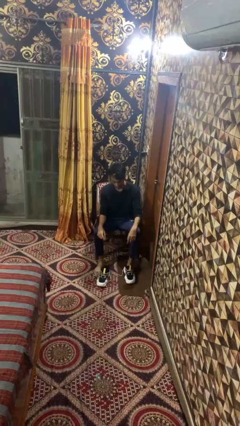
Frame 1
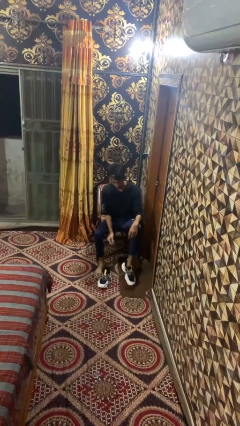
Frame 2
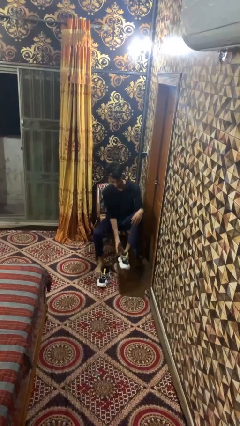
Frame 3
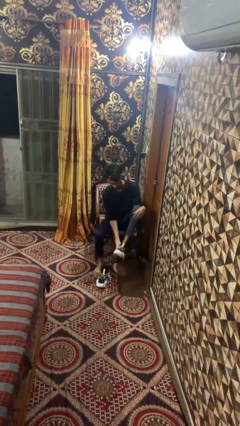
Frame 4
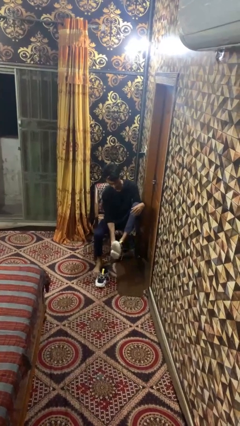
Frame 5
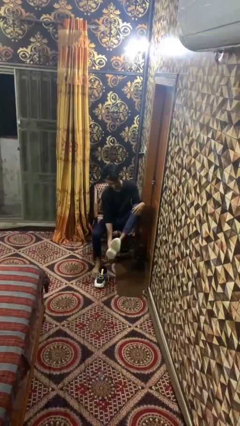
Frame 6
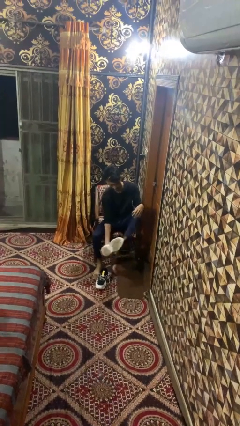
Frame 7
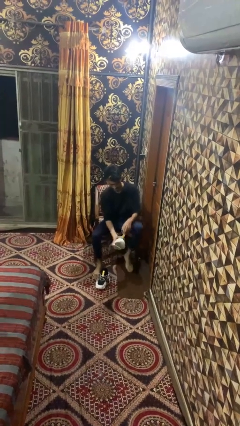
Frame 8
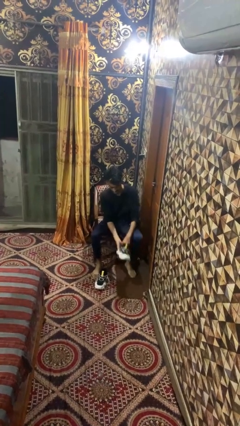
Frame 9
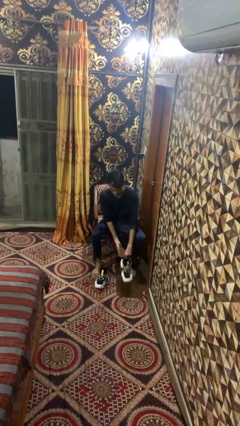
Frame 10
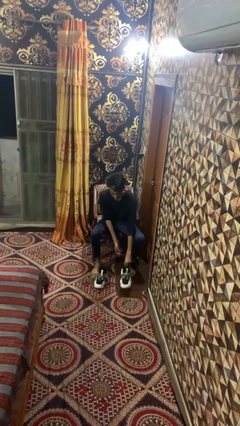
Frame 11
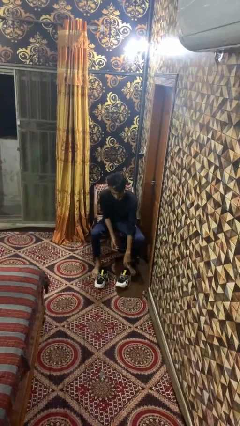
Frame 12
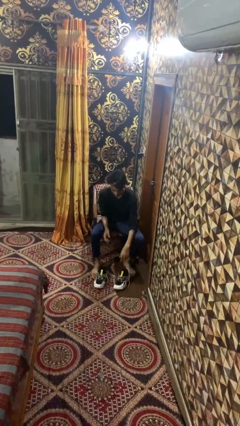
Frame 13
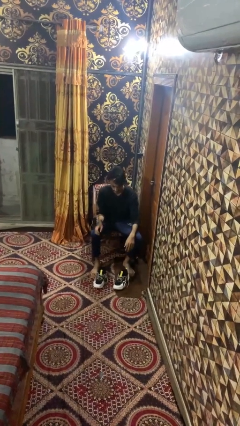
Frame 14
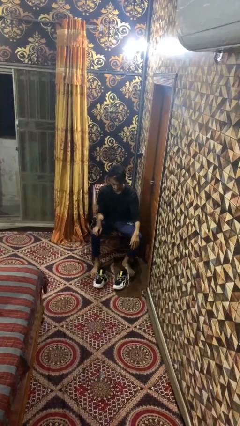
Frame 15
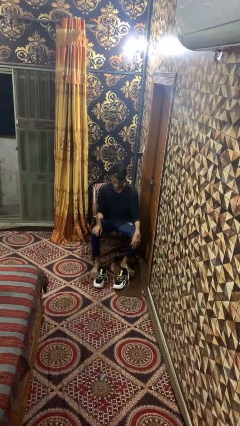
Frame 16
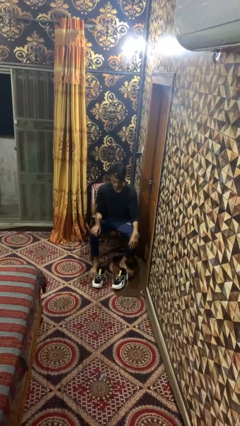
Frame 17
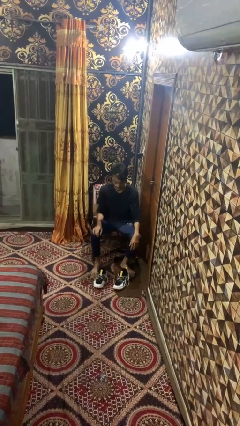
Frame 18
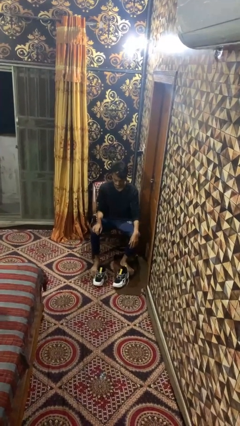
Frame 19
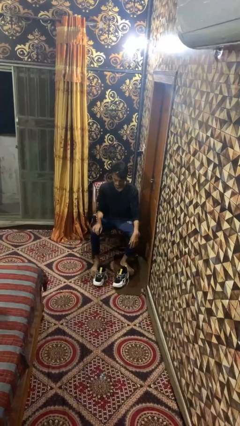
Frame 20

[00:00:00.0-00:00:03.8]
person takes off shoes

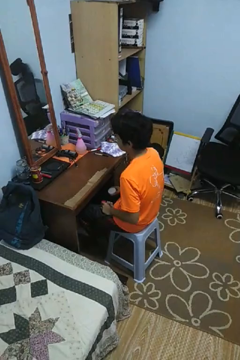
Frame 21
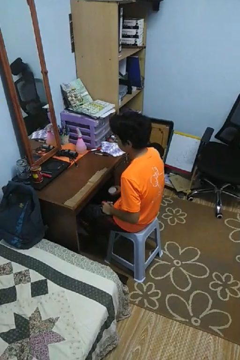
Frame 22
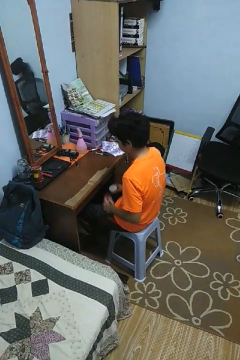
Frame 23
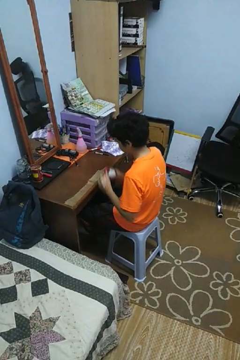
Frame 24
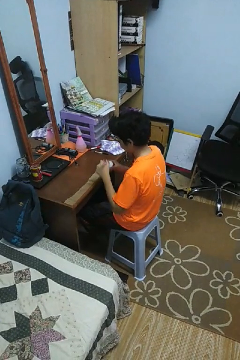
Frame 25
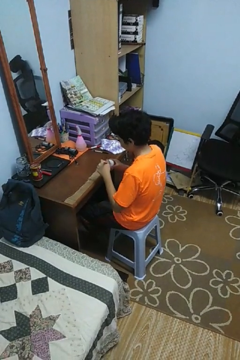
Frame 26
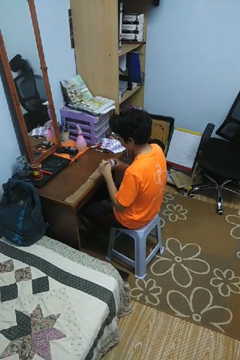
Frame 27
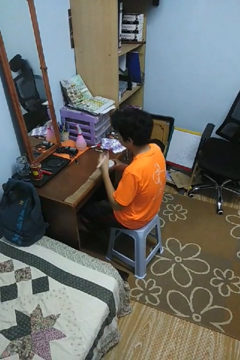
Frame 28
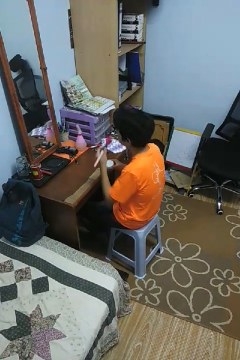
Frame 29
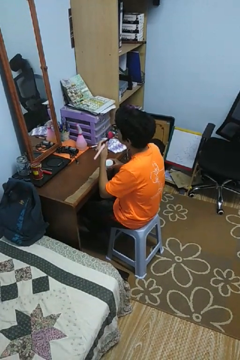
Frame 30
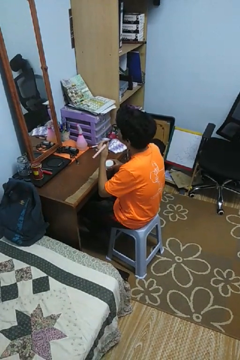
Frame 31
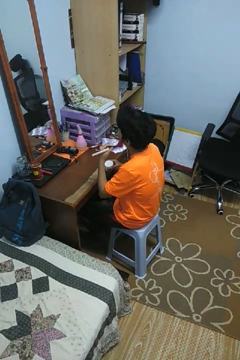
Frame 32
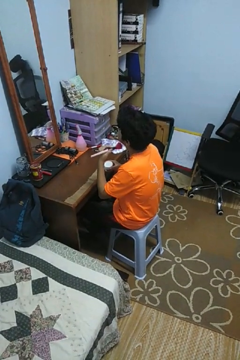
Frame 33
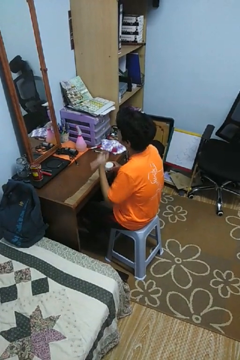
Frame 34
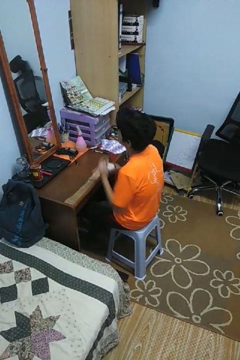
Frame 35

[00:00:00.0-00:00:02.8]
person applies foundation makeup

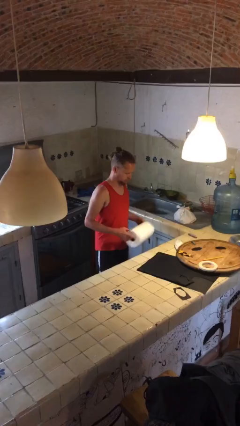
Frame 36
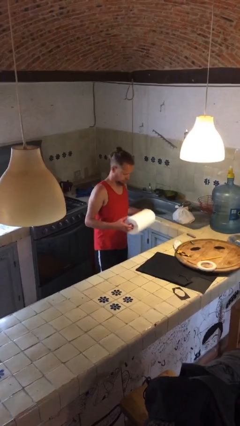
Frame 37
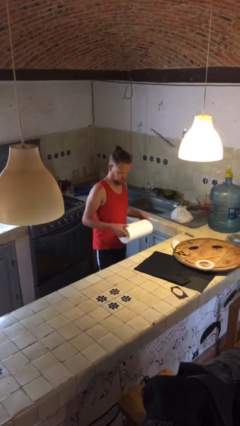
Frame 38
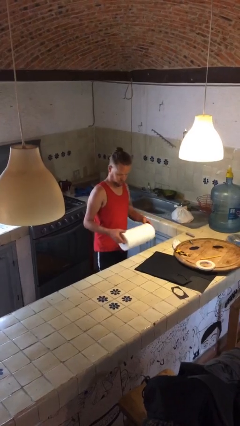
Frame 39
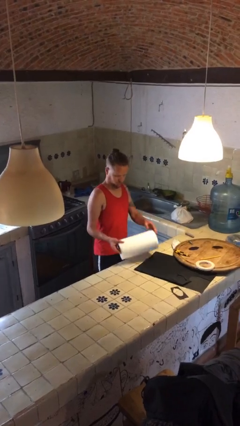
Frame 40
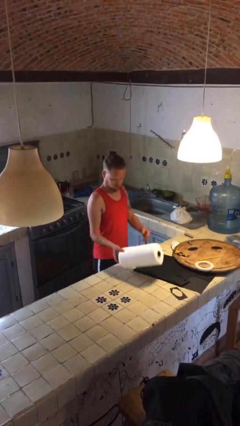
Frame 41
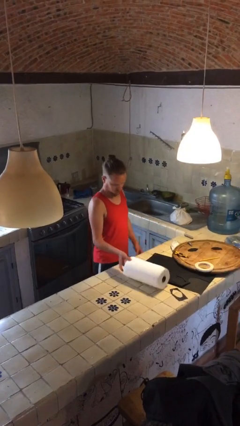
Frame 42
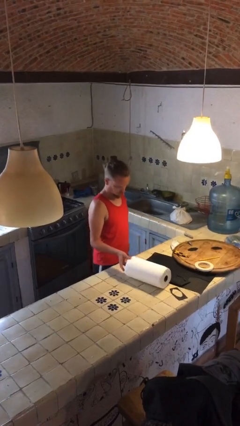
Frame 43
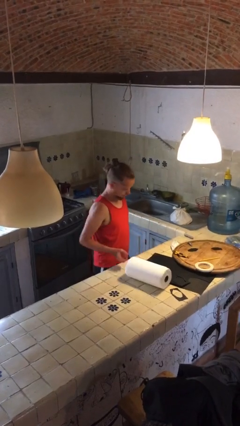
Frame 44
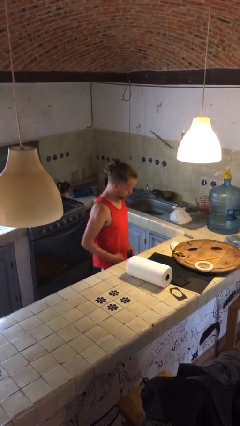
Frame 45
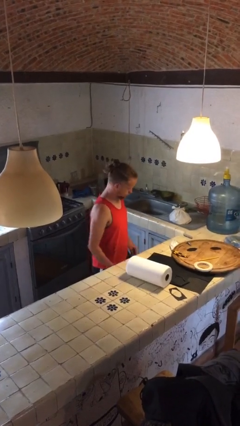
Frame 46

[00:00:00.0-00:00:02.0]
person puts down object on countertop

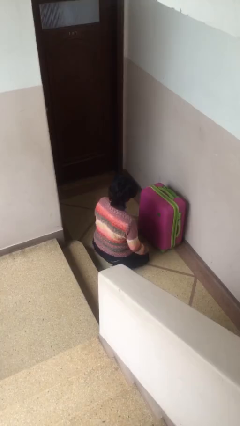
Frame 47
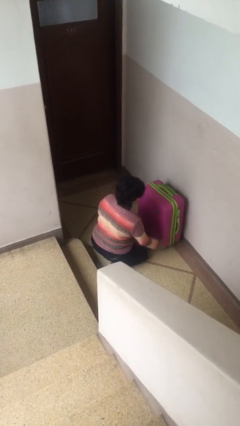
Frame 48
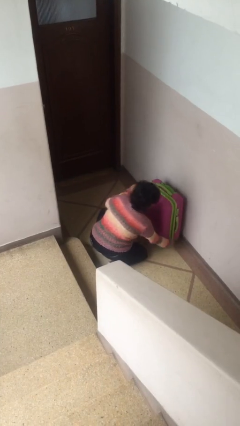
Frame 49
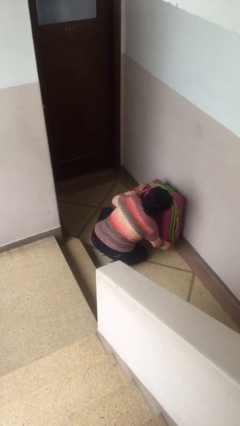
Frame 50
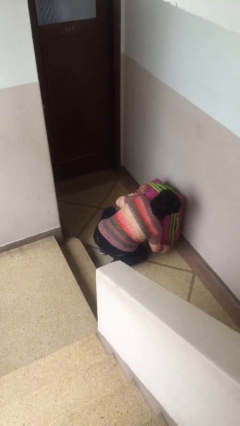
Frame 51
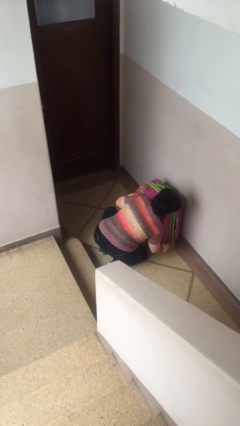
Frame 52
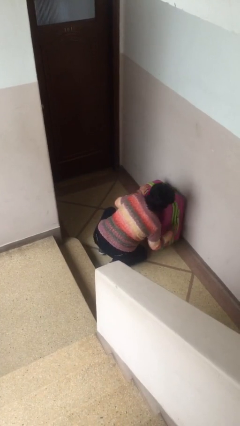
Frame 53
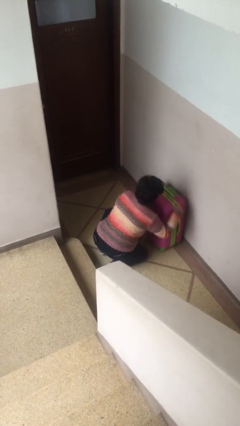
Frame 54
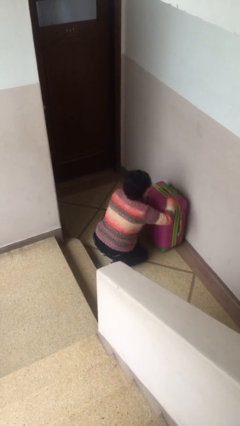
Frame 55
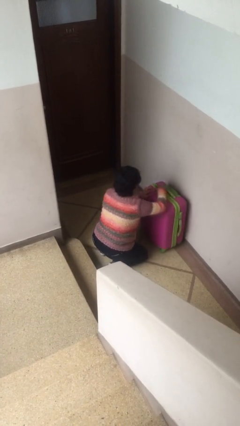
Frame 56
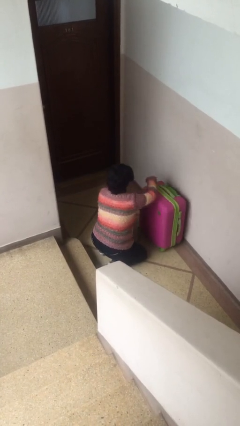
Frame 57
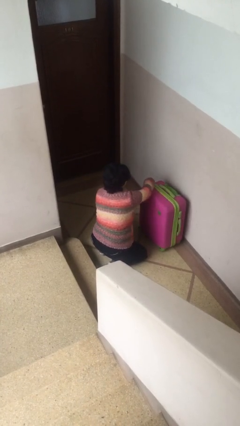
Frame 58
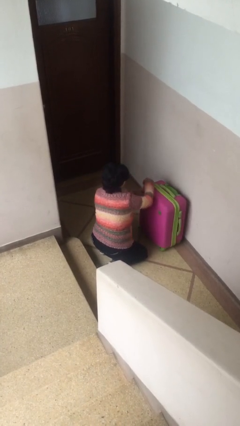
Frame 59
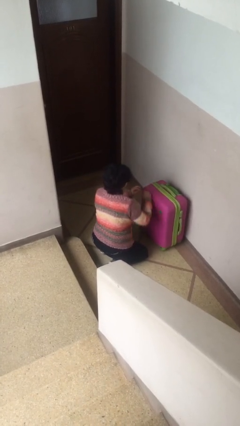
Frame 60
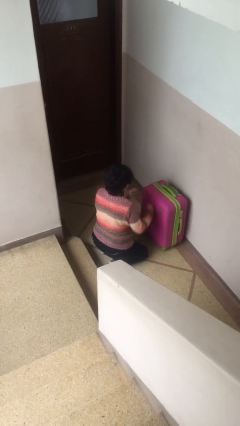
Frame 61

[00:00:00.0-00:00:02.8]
person closes suitcase

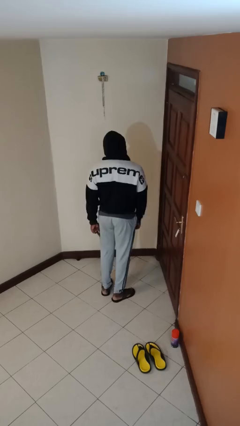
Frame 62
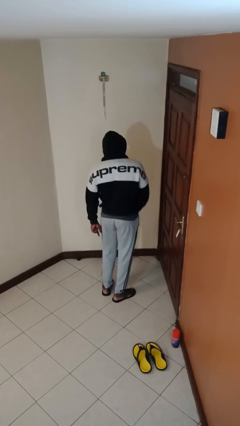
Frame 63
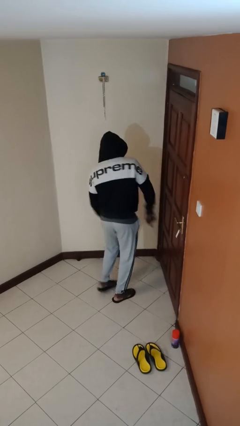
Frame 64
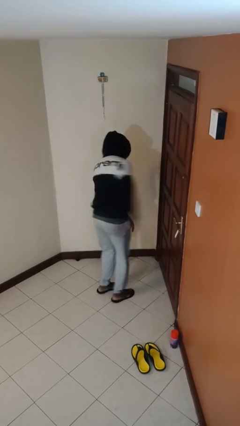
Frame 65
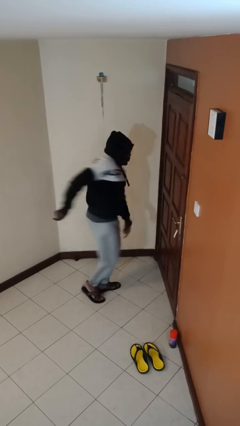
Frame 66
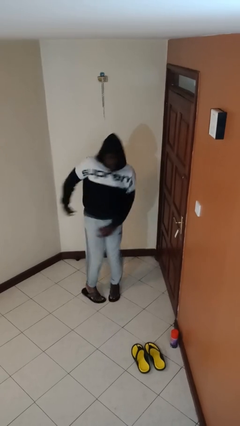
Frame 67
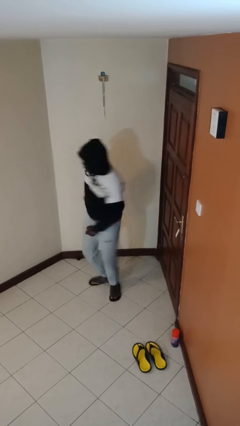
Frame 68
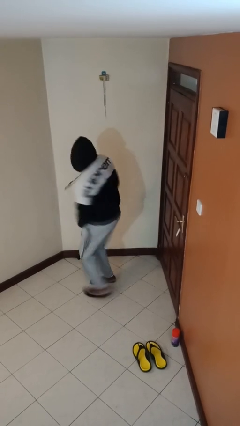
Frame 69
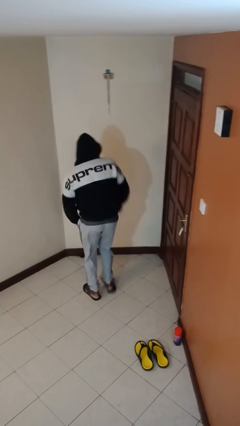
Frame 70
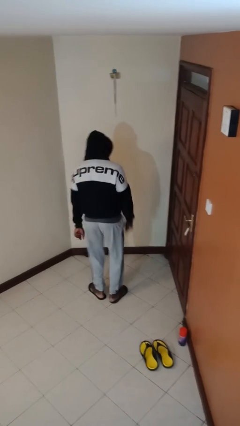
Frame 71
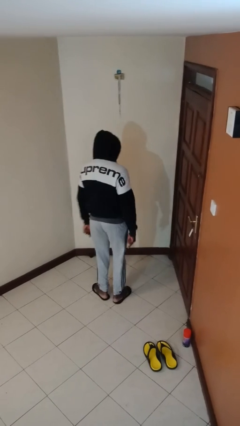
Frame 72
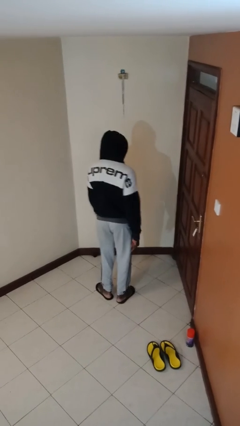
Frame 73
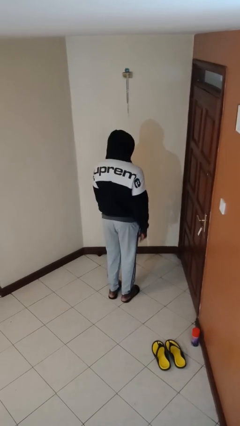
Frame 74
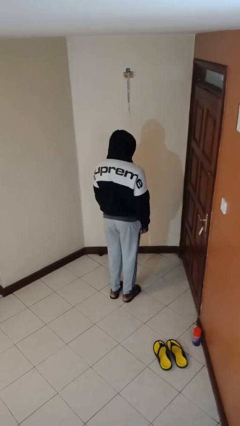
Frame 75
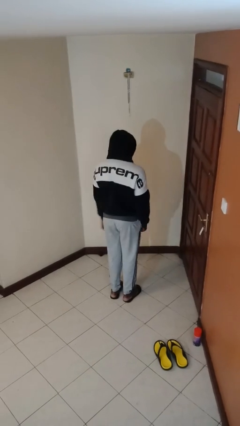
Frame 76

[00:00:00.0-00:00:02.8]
person twirls

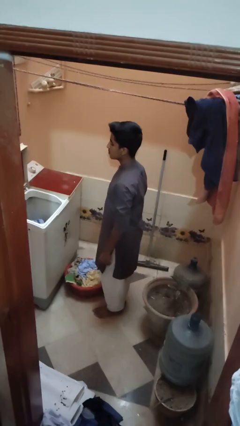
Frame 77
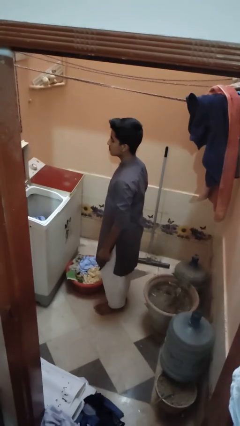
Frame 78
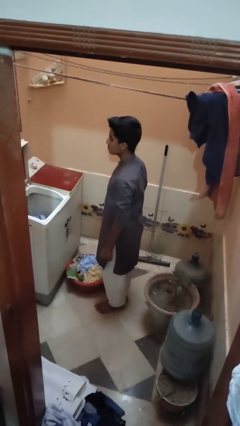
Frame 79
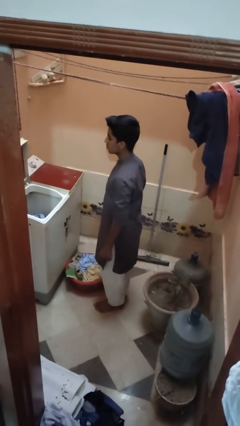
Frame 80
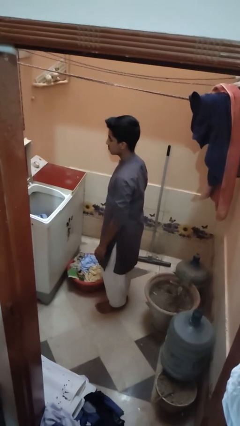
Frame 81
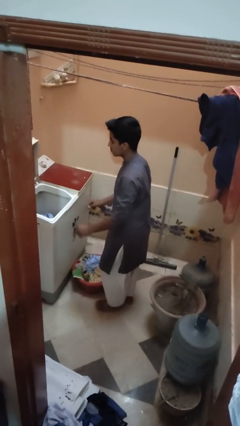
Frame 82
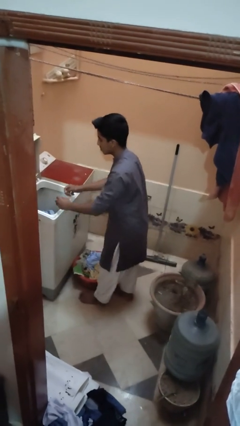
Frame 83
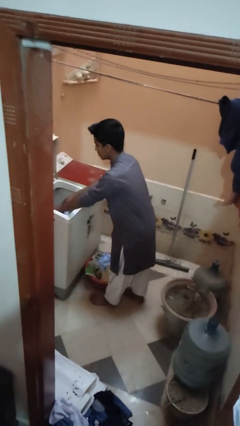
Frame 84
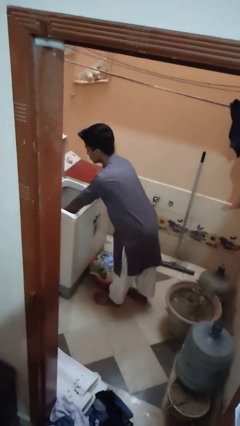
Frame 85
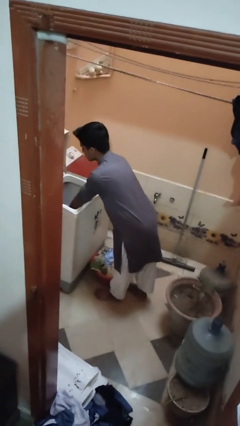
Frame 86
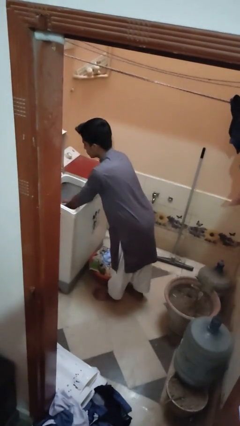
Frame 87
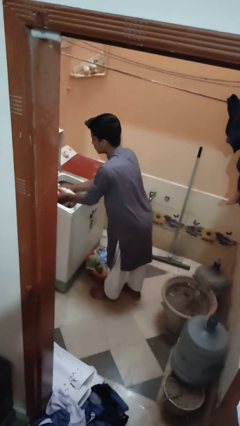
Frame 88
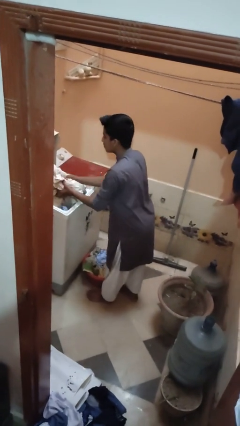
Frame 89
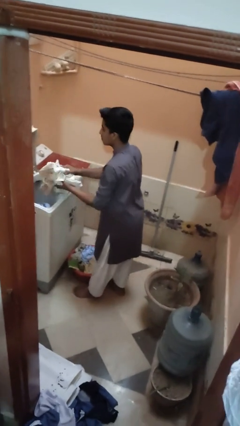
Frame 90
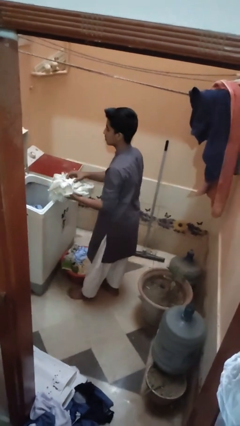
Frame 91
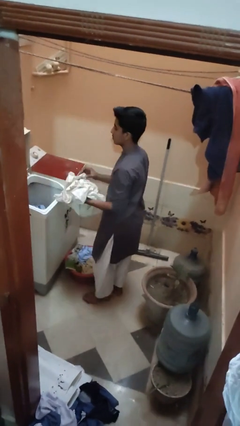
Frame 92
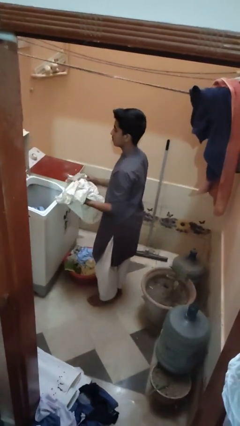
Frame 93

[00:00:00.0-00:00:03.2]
person unloads clotheswasher

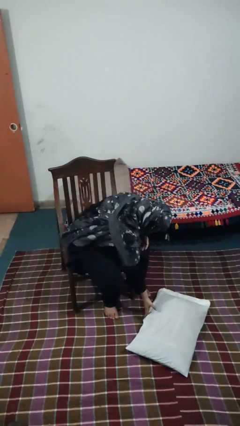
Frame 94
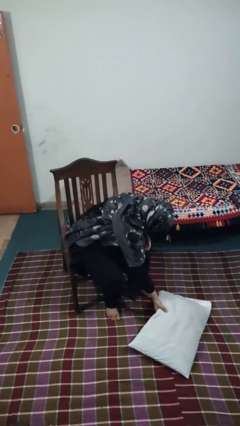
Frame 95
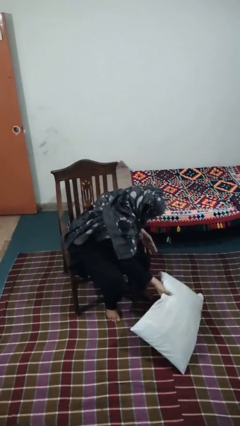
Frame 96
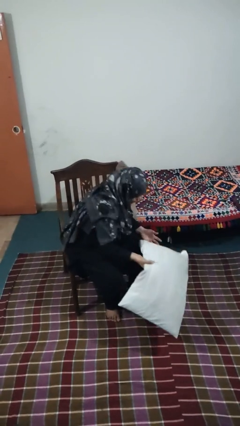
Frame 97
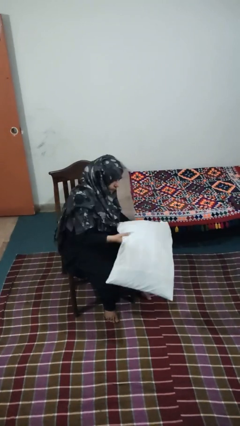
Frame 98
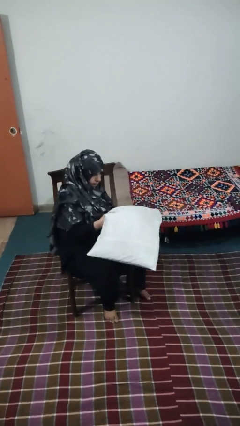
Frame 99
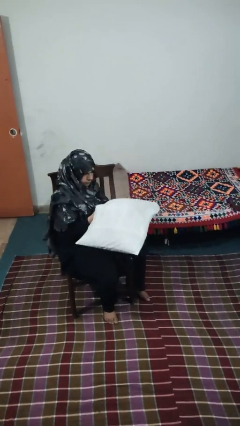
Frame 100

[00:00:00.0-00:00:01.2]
person picks up object from floor
